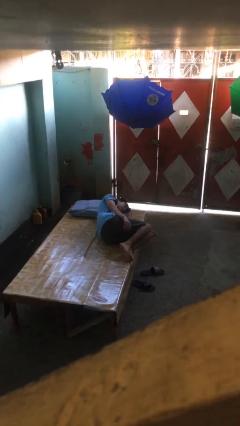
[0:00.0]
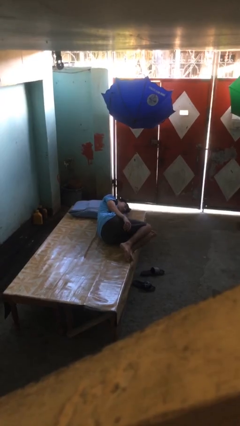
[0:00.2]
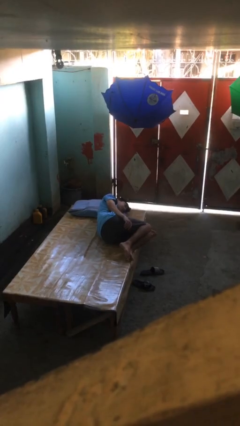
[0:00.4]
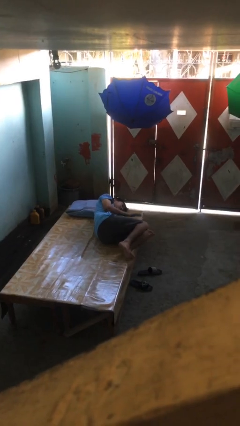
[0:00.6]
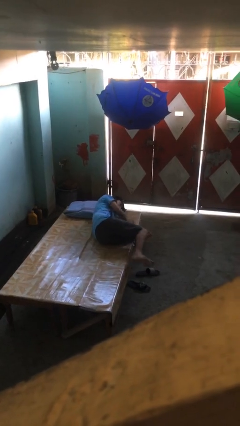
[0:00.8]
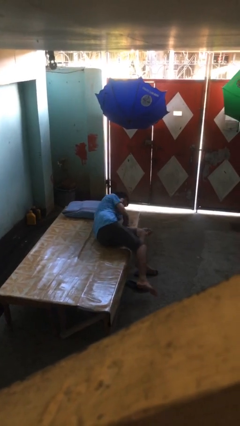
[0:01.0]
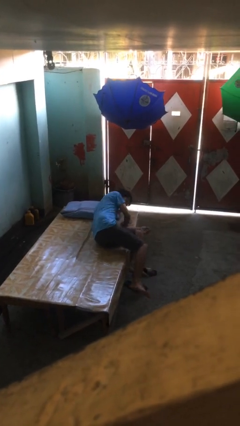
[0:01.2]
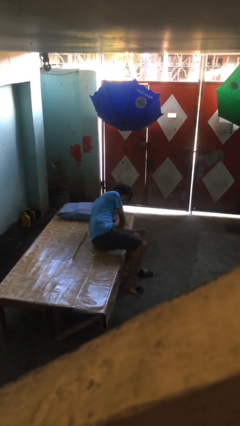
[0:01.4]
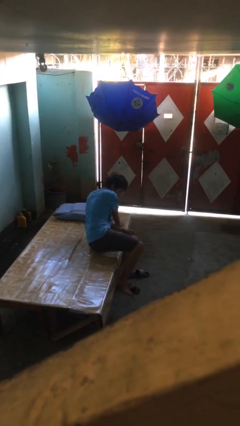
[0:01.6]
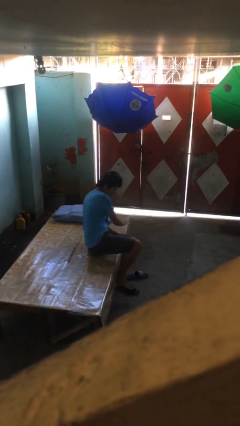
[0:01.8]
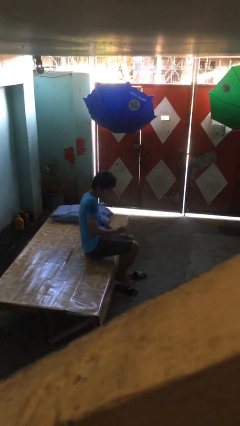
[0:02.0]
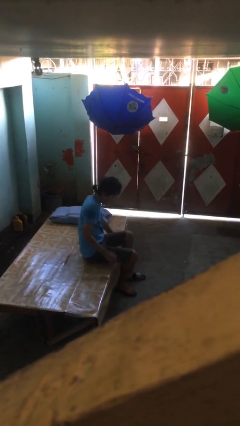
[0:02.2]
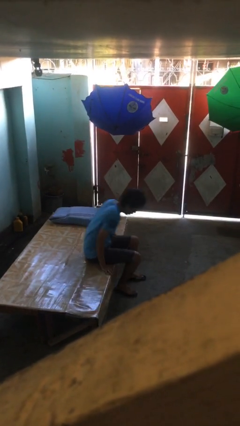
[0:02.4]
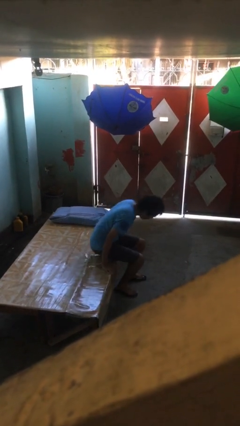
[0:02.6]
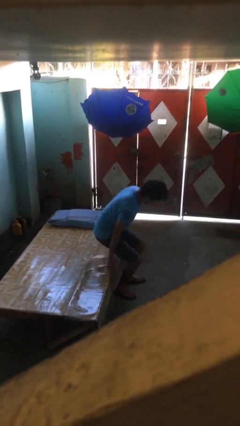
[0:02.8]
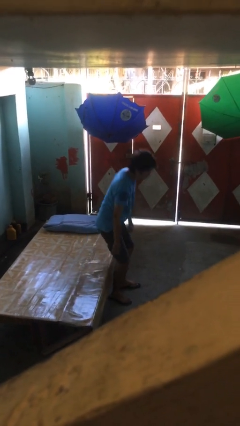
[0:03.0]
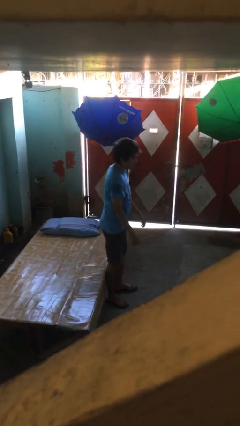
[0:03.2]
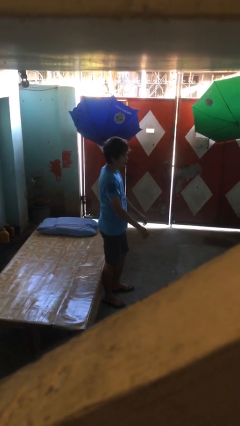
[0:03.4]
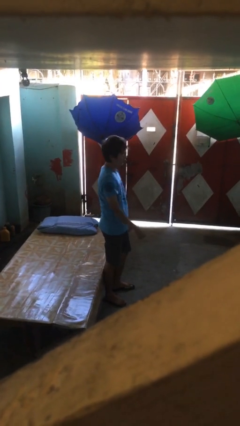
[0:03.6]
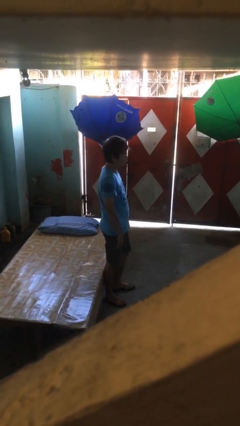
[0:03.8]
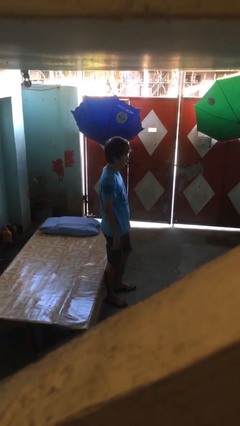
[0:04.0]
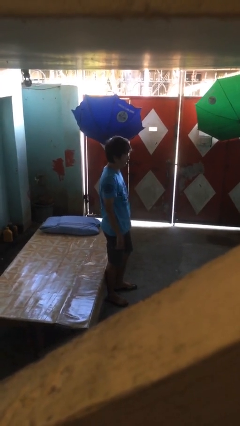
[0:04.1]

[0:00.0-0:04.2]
person stands up

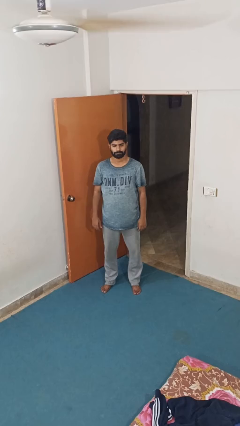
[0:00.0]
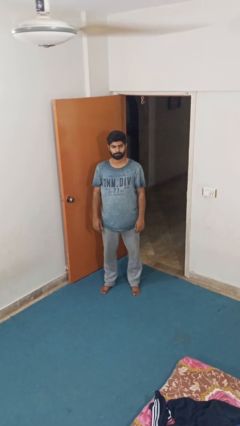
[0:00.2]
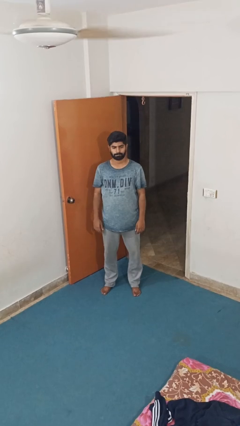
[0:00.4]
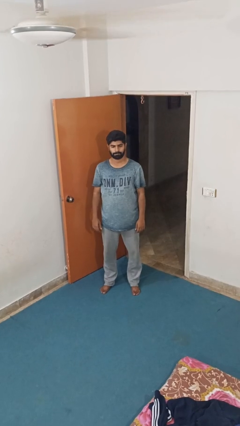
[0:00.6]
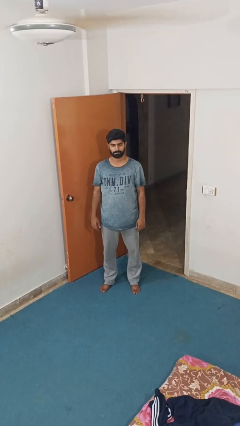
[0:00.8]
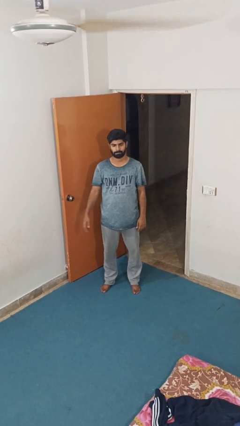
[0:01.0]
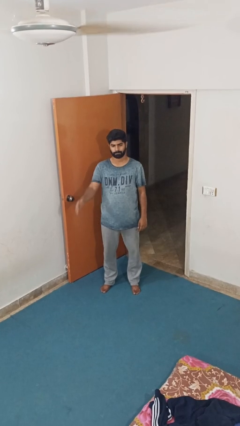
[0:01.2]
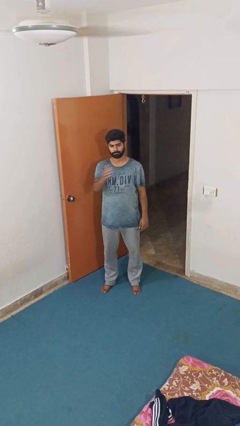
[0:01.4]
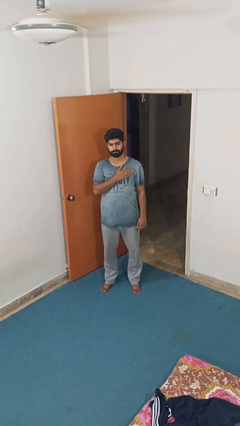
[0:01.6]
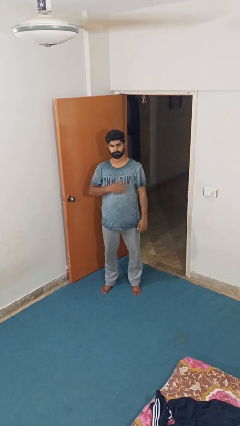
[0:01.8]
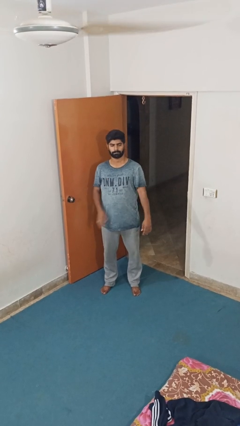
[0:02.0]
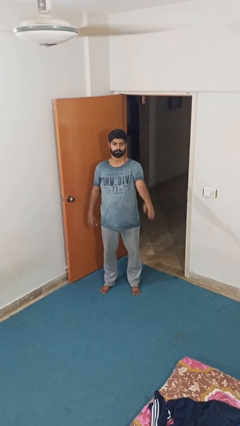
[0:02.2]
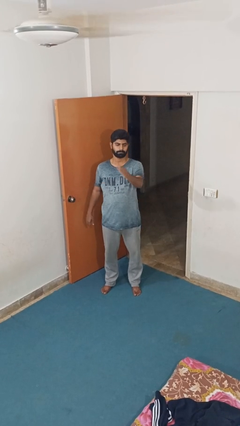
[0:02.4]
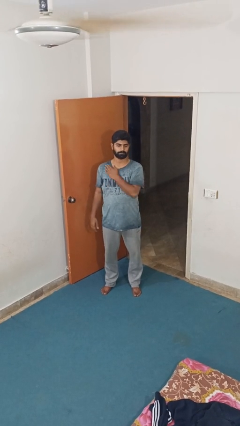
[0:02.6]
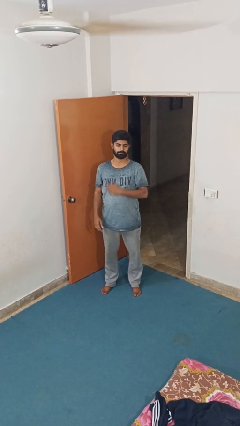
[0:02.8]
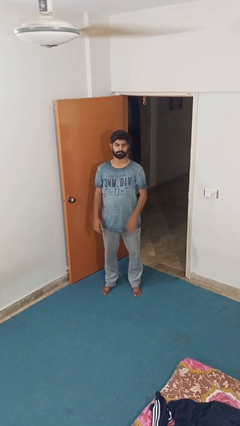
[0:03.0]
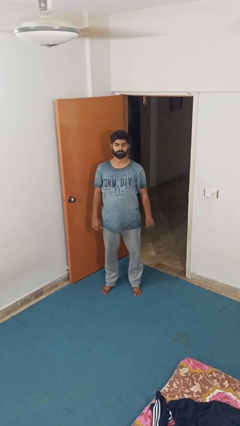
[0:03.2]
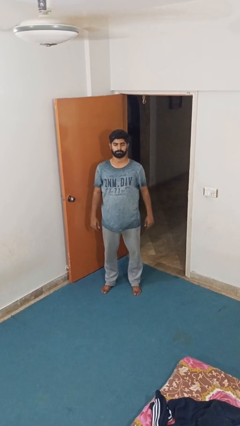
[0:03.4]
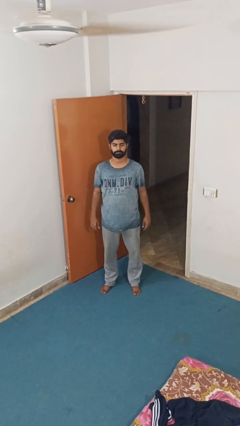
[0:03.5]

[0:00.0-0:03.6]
person drums on chest

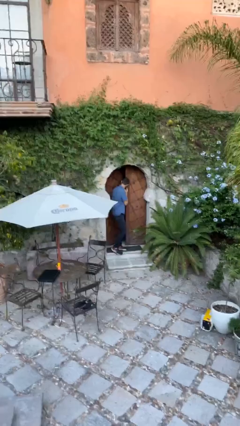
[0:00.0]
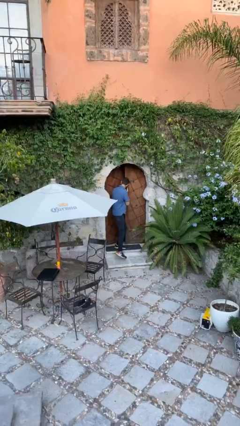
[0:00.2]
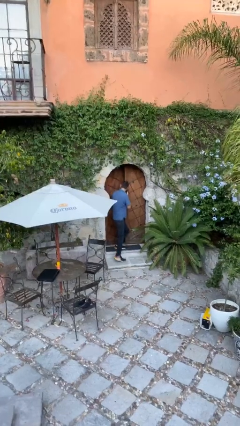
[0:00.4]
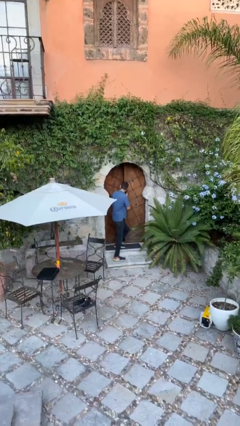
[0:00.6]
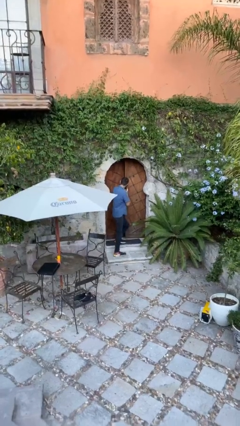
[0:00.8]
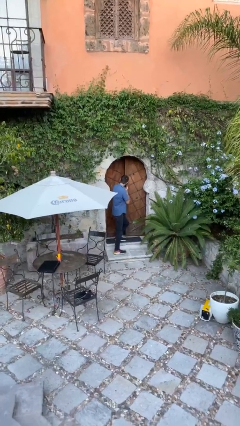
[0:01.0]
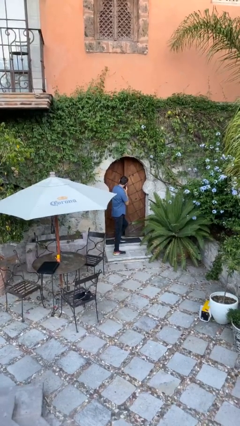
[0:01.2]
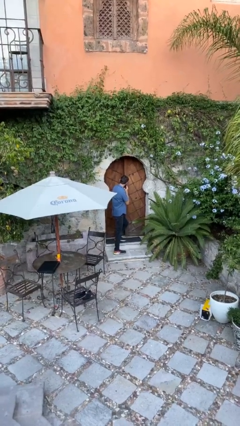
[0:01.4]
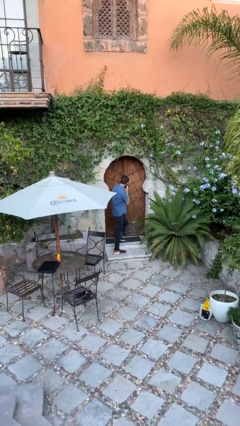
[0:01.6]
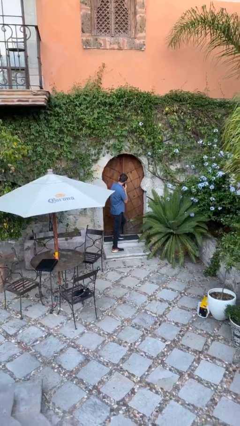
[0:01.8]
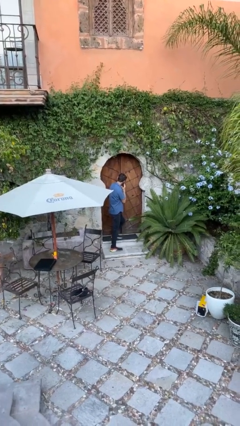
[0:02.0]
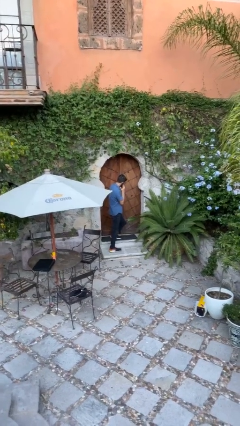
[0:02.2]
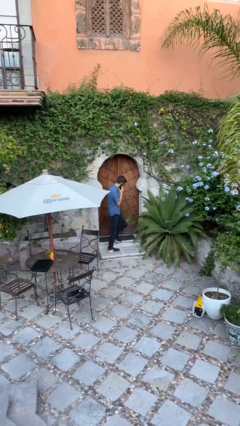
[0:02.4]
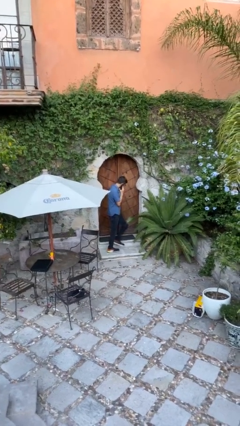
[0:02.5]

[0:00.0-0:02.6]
person closes facility door

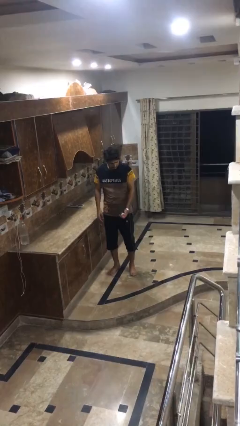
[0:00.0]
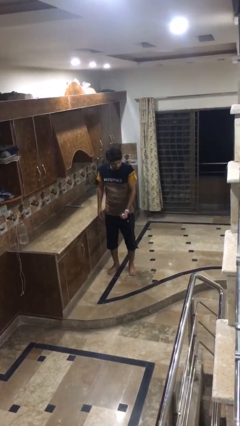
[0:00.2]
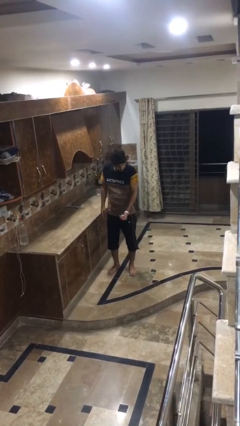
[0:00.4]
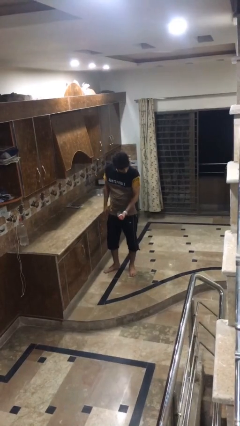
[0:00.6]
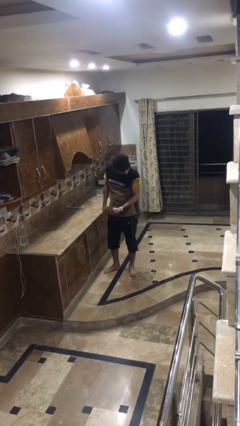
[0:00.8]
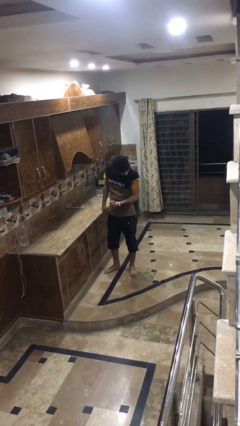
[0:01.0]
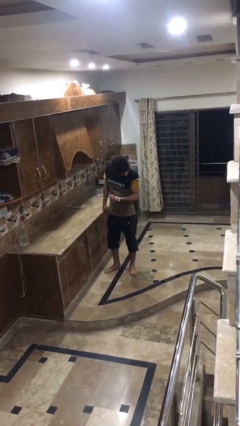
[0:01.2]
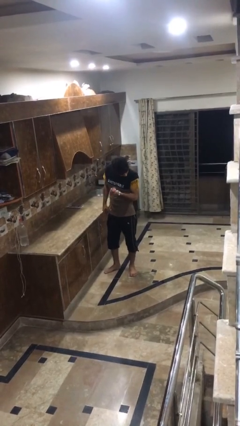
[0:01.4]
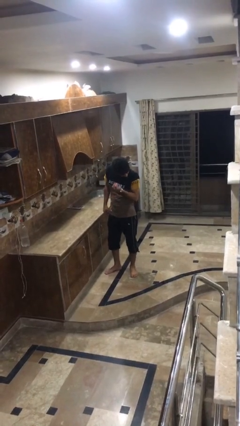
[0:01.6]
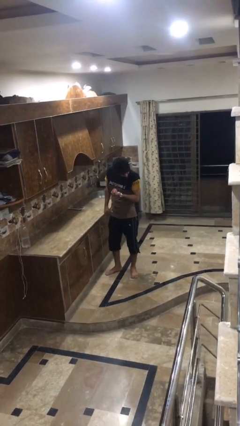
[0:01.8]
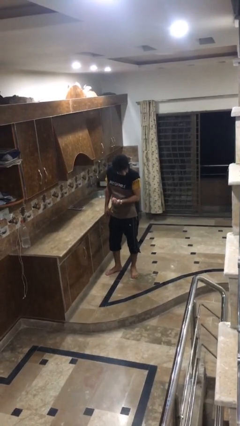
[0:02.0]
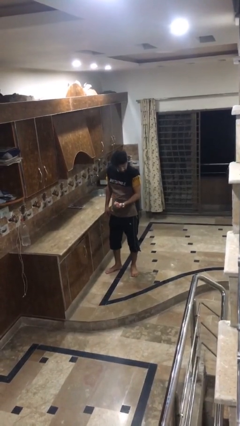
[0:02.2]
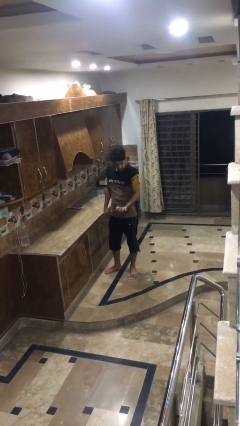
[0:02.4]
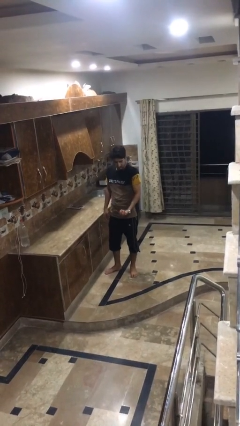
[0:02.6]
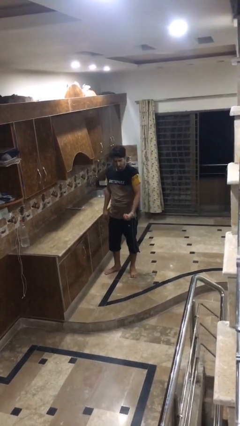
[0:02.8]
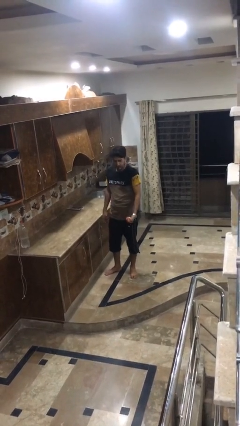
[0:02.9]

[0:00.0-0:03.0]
person lifts dumbbells

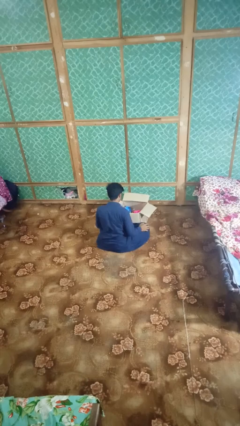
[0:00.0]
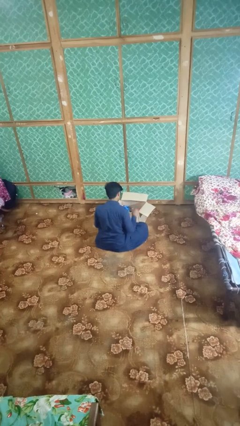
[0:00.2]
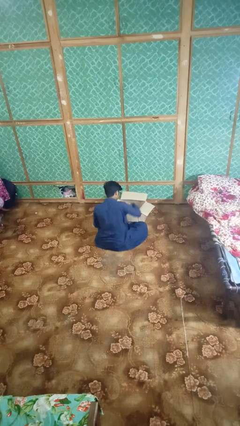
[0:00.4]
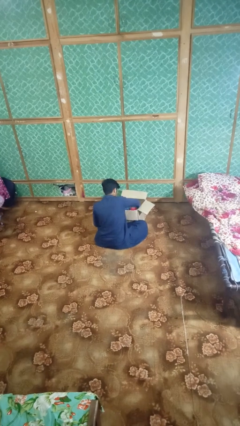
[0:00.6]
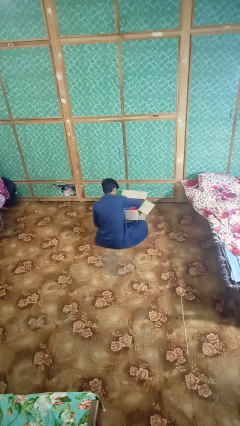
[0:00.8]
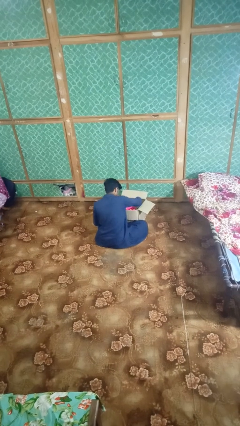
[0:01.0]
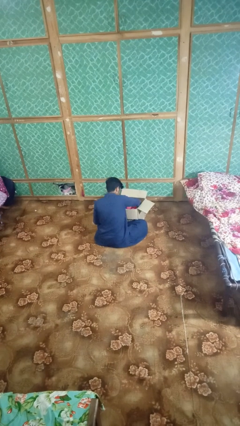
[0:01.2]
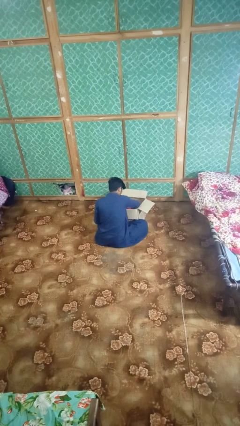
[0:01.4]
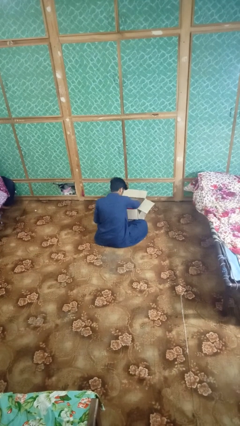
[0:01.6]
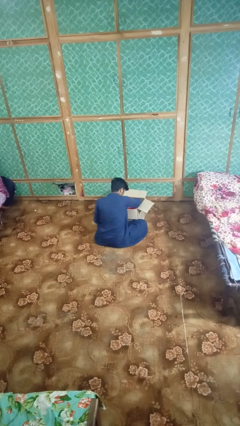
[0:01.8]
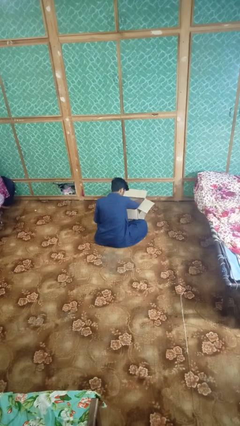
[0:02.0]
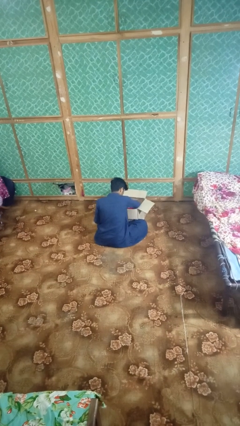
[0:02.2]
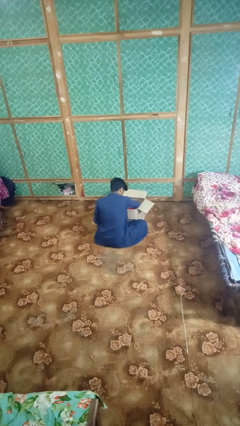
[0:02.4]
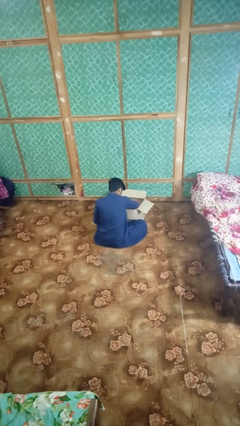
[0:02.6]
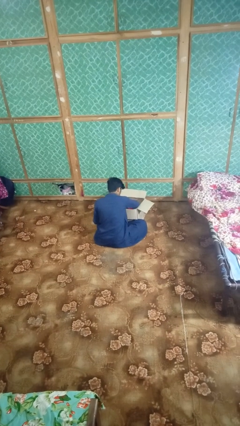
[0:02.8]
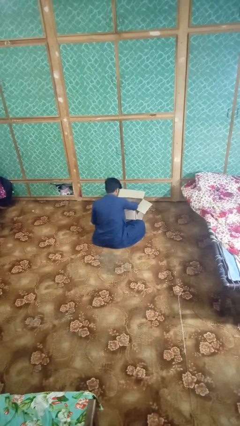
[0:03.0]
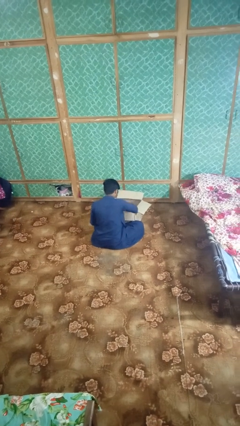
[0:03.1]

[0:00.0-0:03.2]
person searches in box

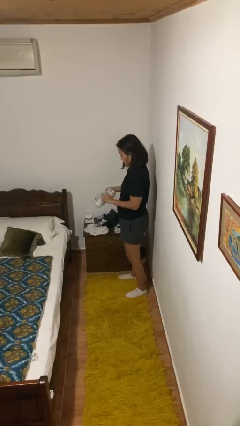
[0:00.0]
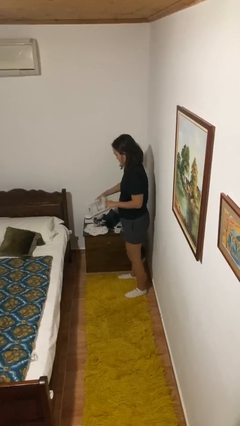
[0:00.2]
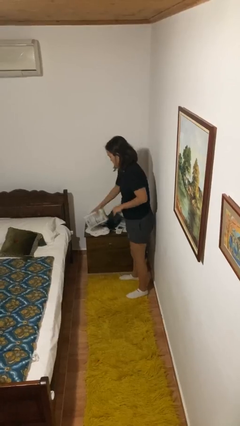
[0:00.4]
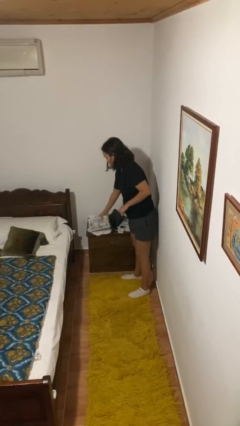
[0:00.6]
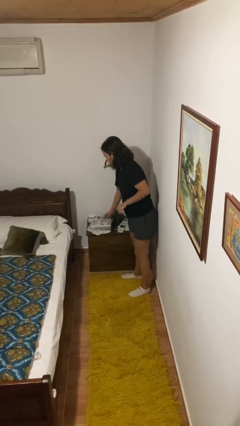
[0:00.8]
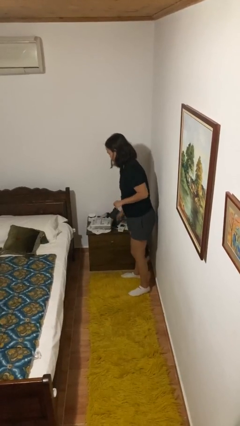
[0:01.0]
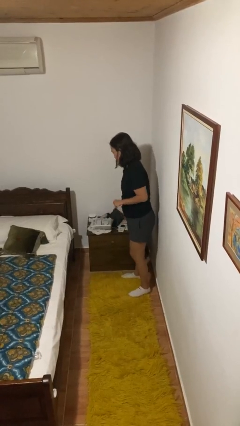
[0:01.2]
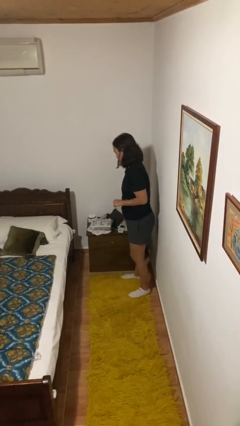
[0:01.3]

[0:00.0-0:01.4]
person puts down object on countertop
